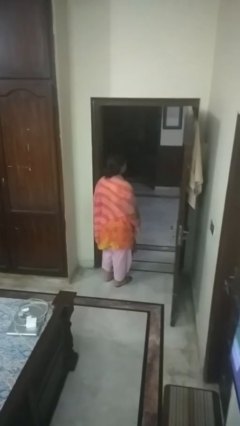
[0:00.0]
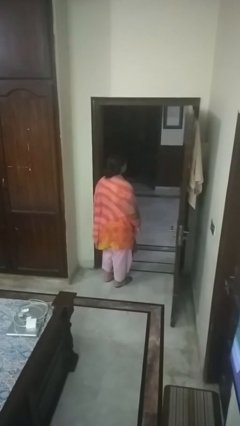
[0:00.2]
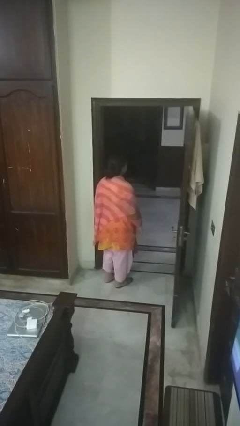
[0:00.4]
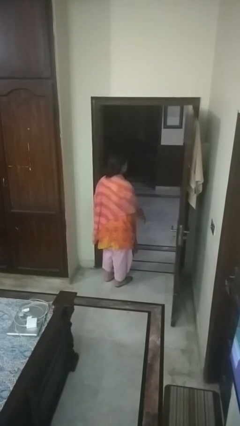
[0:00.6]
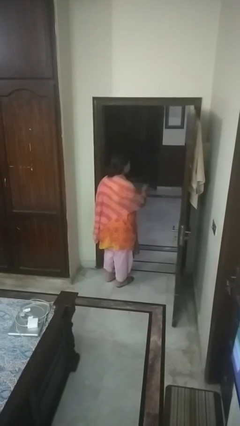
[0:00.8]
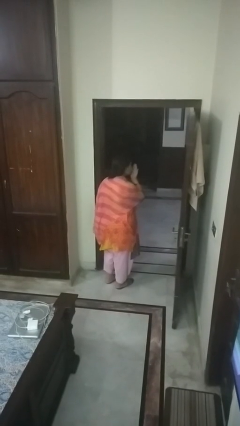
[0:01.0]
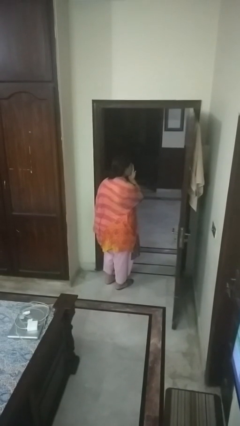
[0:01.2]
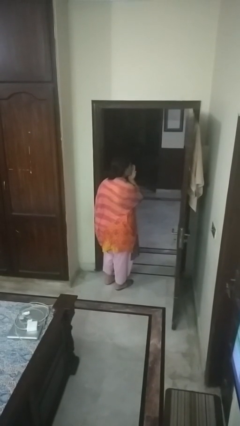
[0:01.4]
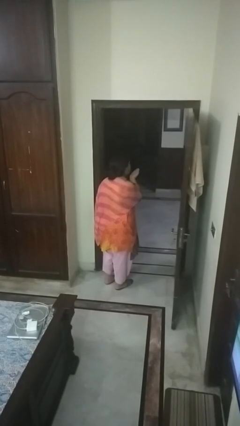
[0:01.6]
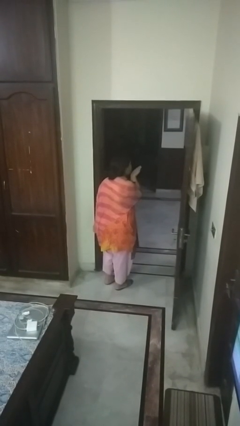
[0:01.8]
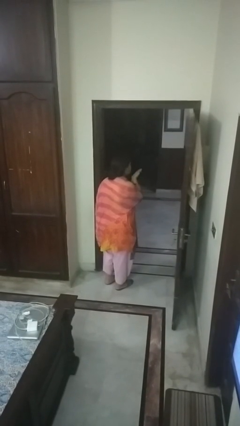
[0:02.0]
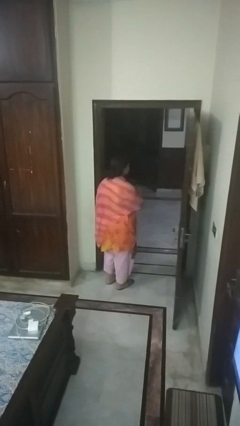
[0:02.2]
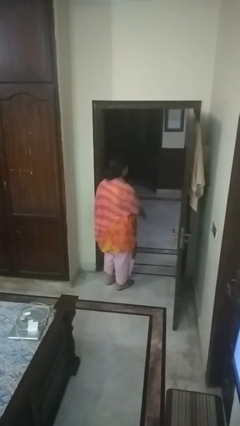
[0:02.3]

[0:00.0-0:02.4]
person gestures blow kiss

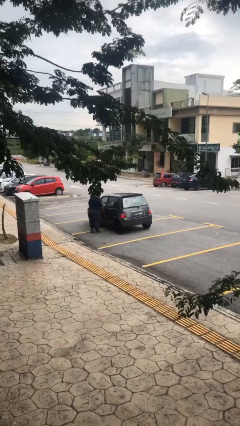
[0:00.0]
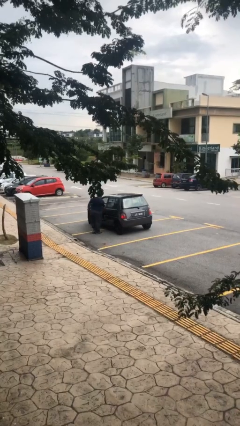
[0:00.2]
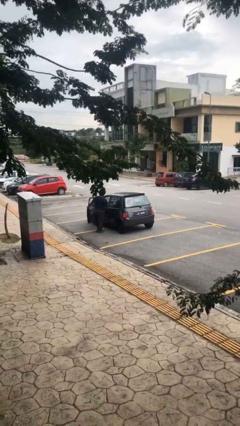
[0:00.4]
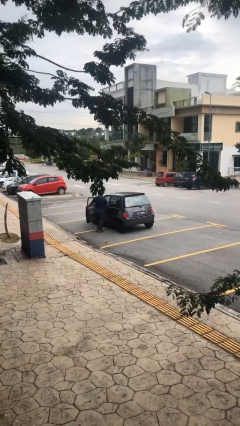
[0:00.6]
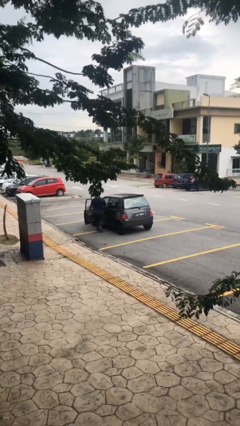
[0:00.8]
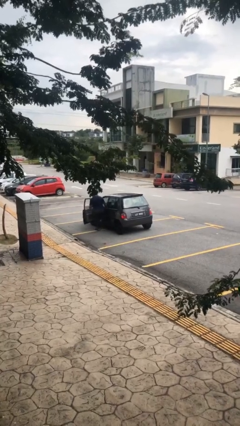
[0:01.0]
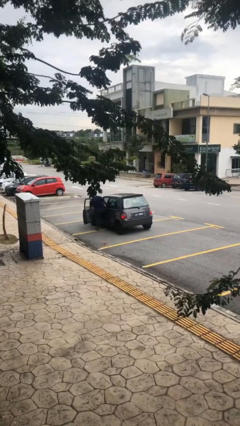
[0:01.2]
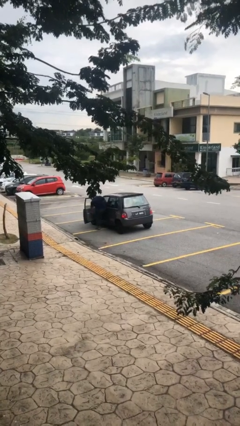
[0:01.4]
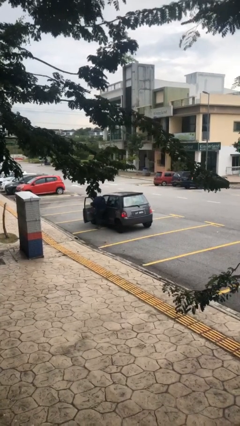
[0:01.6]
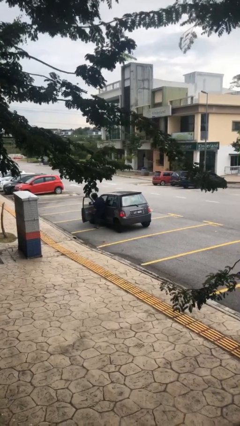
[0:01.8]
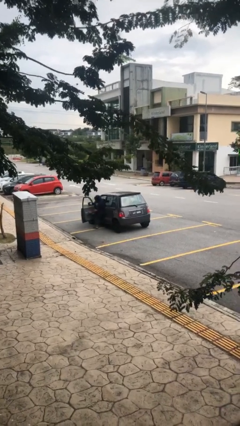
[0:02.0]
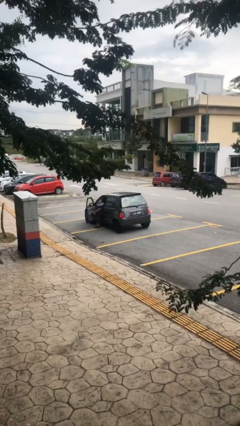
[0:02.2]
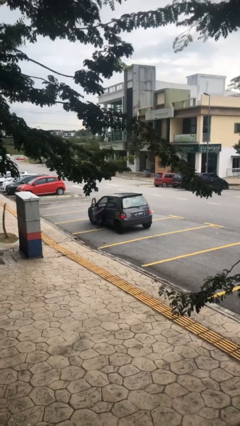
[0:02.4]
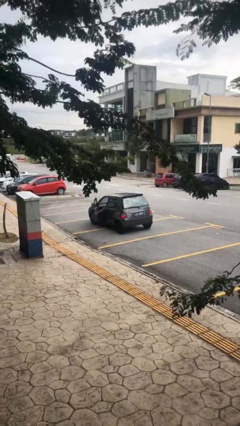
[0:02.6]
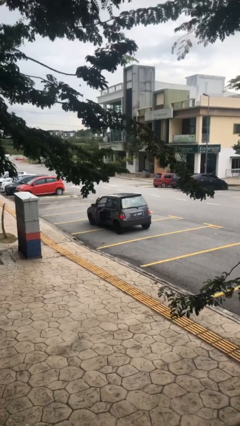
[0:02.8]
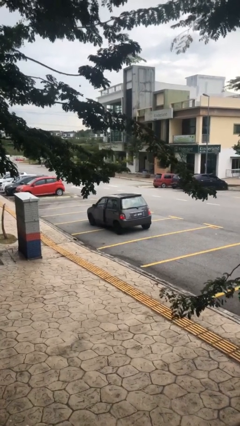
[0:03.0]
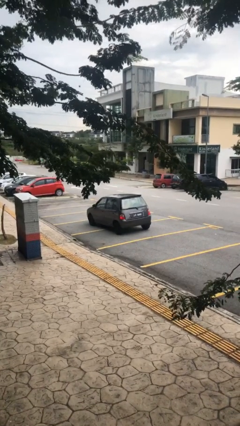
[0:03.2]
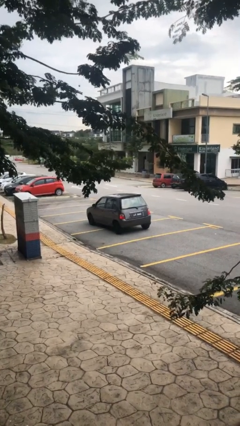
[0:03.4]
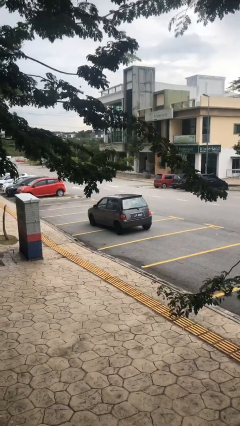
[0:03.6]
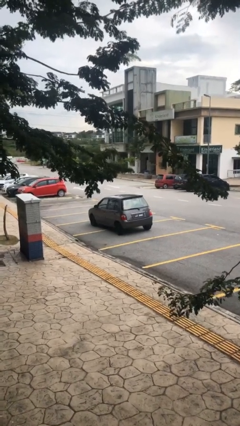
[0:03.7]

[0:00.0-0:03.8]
car picks up person

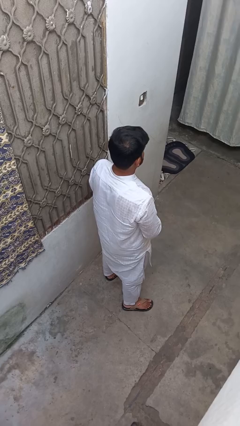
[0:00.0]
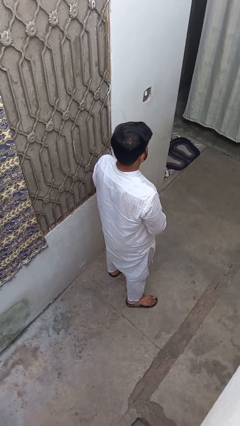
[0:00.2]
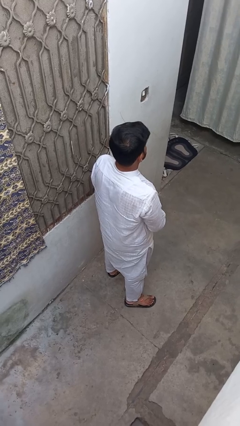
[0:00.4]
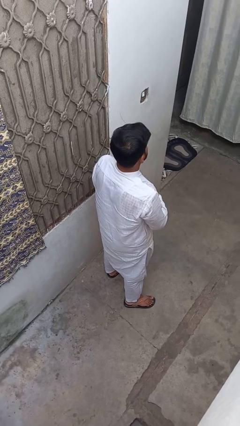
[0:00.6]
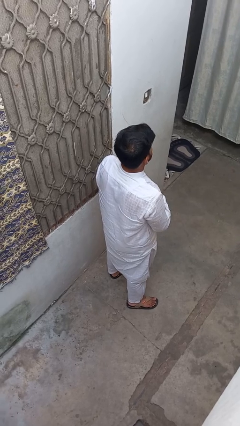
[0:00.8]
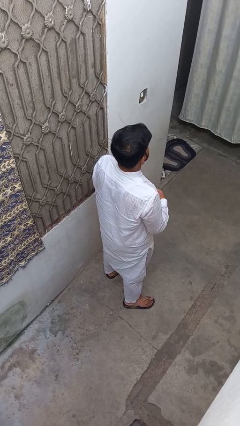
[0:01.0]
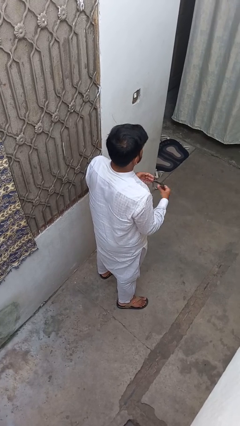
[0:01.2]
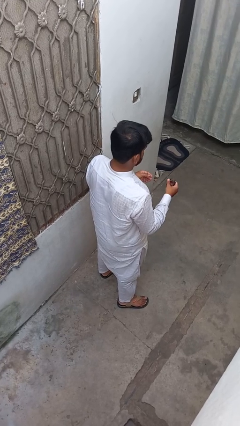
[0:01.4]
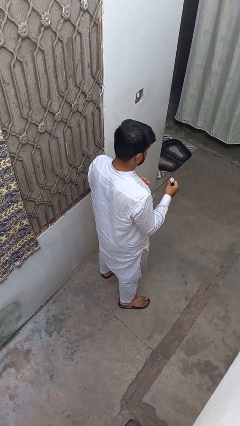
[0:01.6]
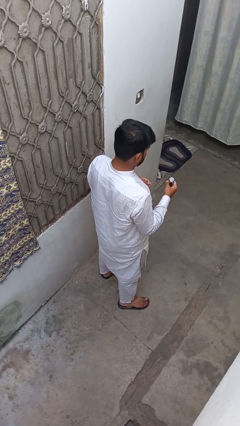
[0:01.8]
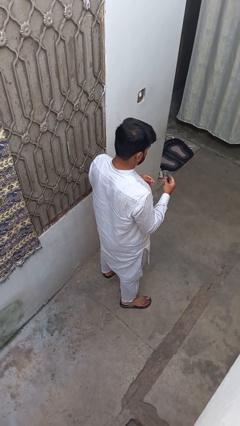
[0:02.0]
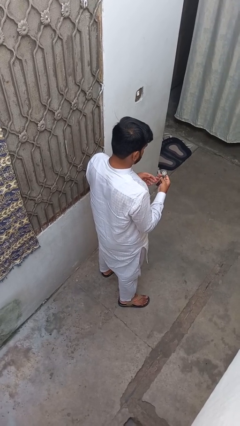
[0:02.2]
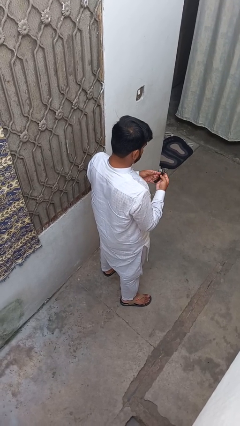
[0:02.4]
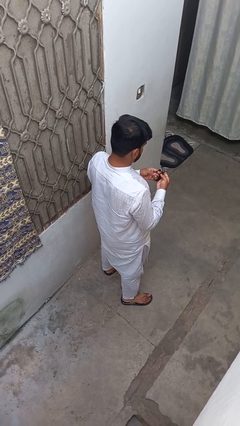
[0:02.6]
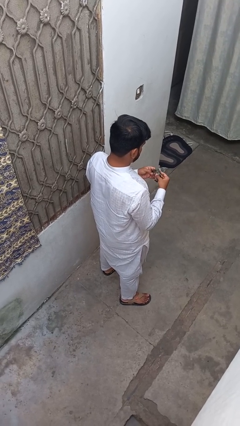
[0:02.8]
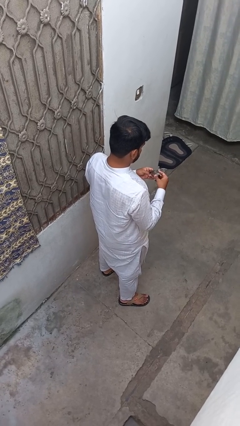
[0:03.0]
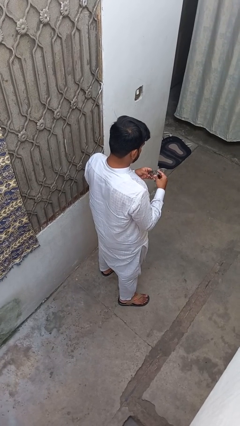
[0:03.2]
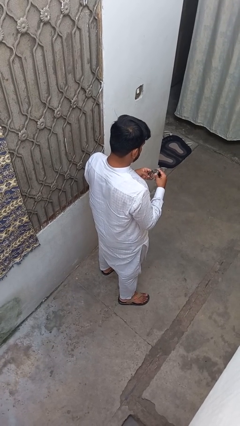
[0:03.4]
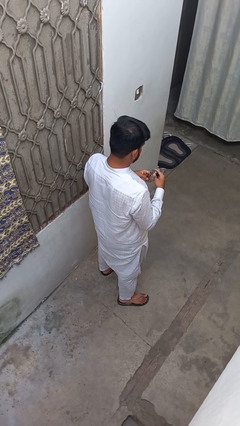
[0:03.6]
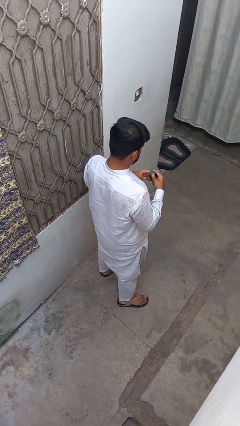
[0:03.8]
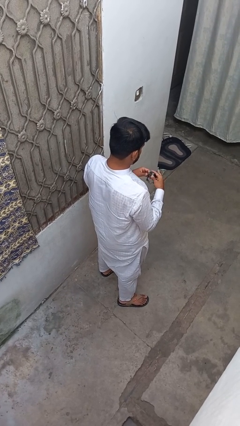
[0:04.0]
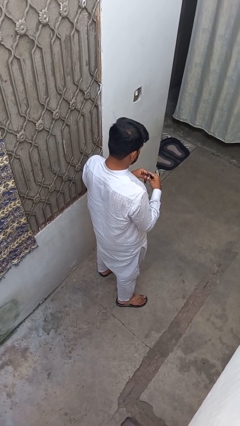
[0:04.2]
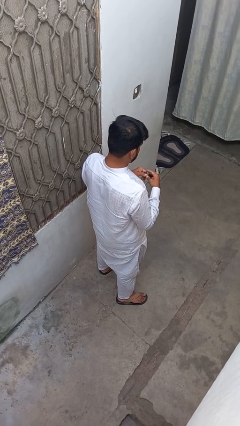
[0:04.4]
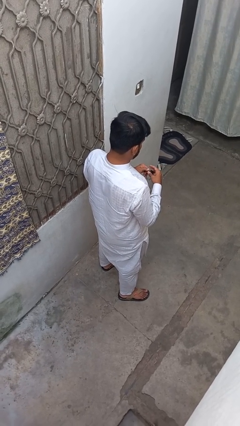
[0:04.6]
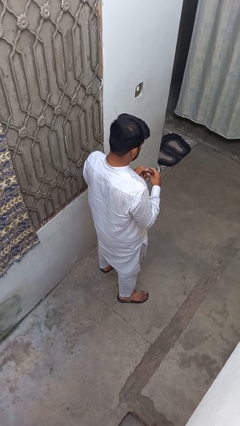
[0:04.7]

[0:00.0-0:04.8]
person takes off wristwatch

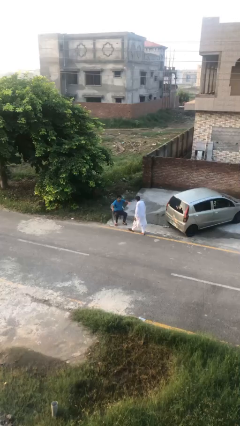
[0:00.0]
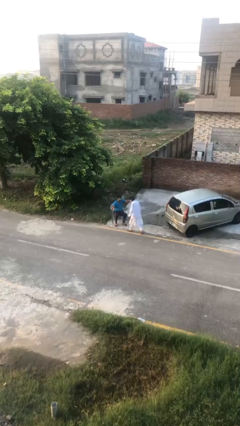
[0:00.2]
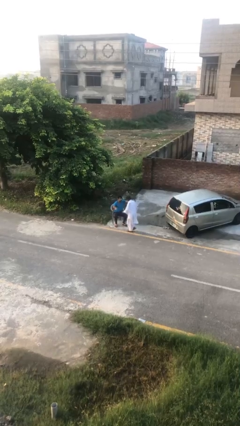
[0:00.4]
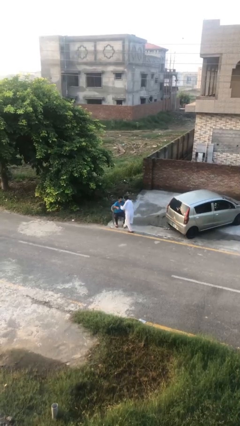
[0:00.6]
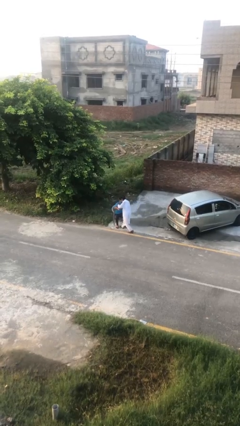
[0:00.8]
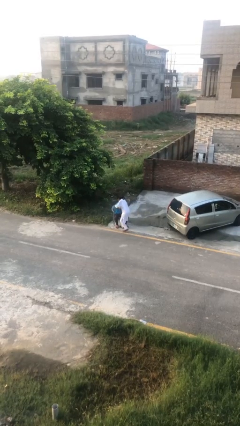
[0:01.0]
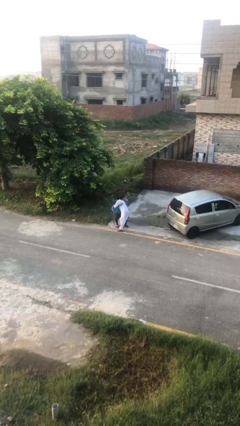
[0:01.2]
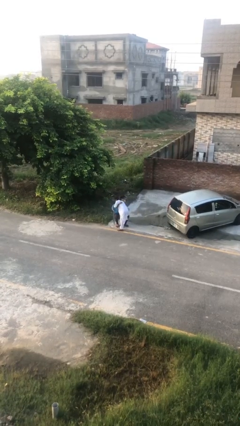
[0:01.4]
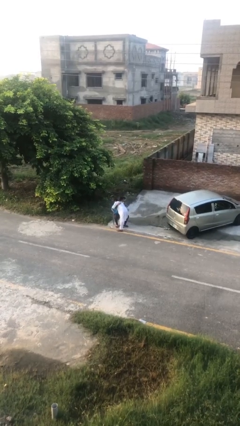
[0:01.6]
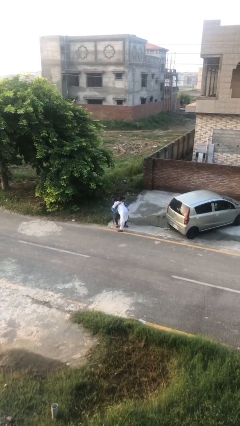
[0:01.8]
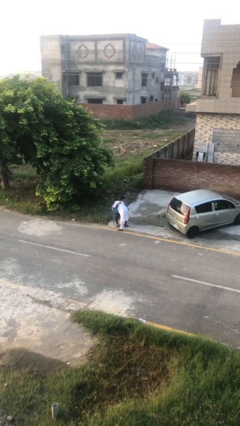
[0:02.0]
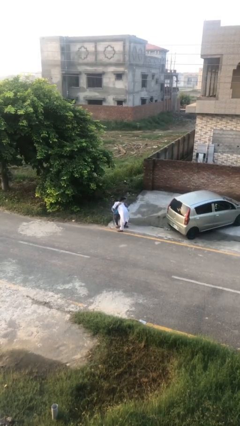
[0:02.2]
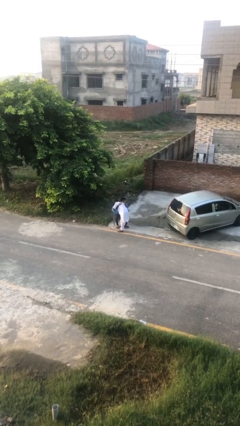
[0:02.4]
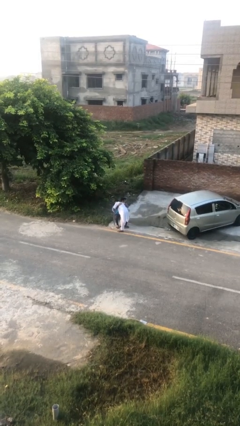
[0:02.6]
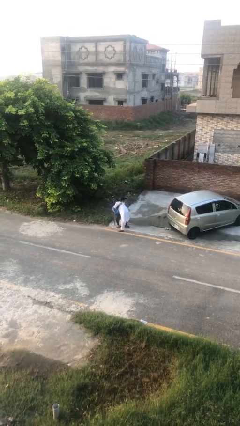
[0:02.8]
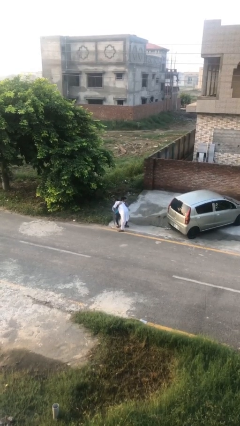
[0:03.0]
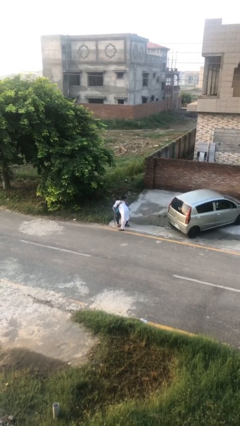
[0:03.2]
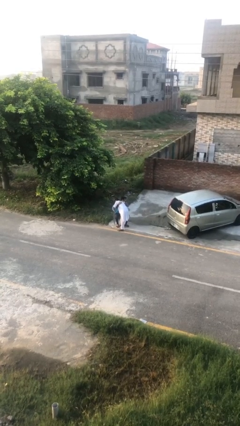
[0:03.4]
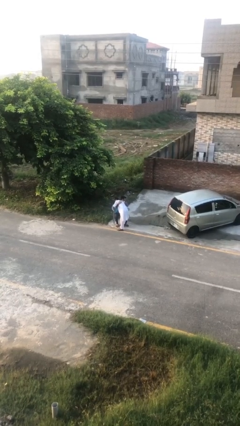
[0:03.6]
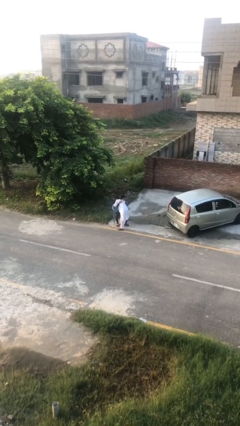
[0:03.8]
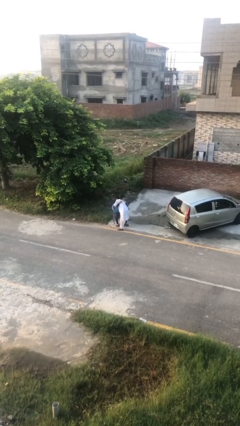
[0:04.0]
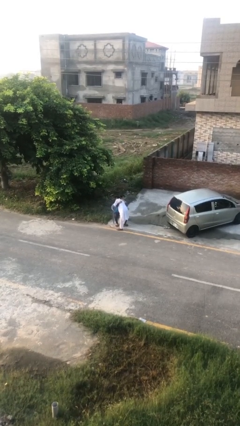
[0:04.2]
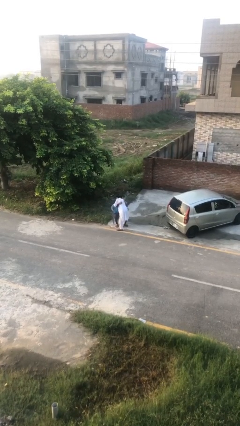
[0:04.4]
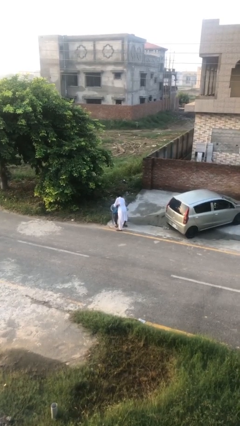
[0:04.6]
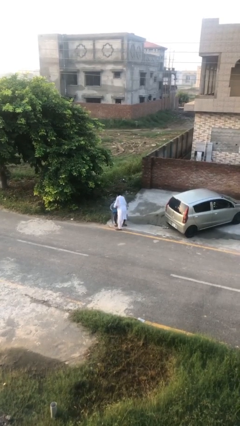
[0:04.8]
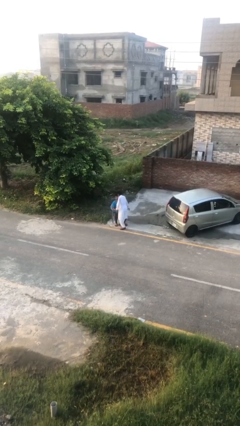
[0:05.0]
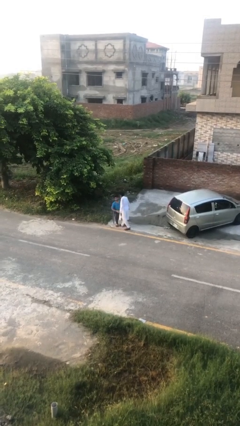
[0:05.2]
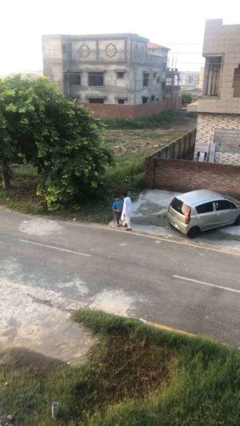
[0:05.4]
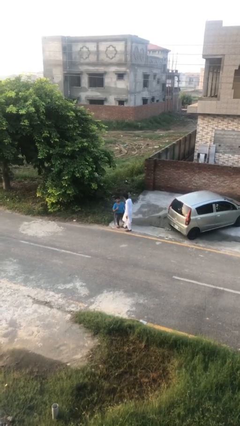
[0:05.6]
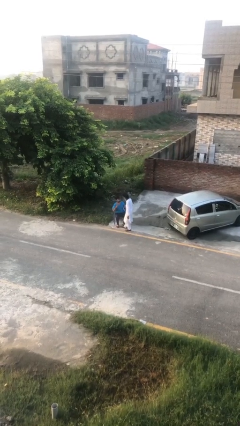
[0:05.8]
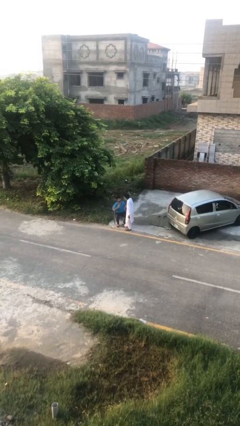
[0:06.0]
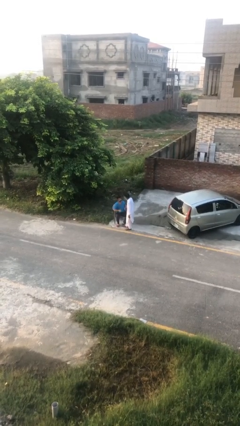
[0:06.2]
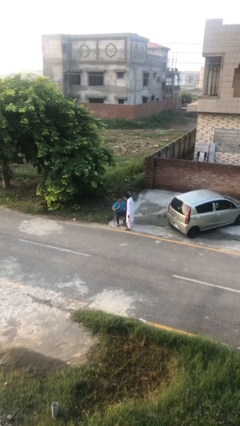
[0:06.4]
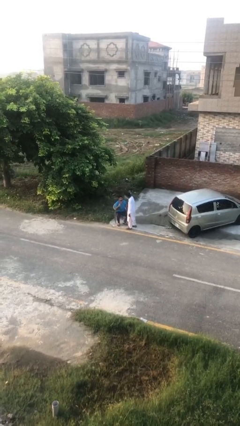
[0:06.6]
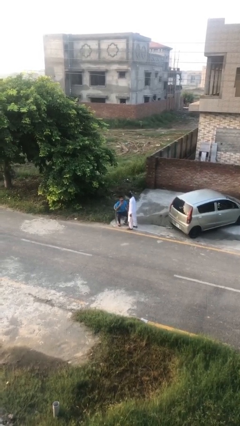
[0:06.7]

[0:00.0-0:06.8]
person embraces person
